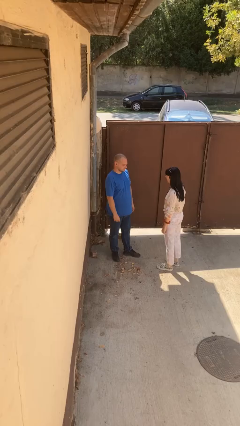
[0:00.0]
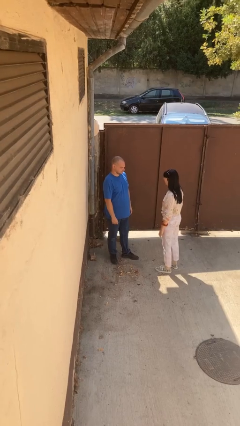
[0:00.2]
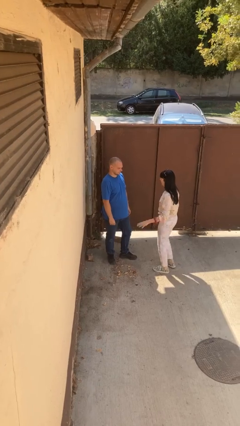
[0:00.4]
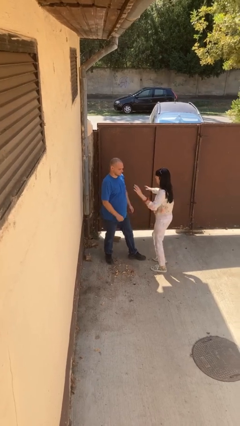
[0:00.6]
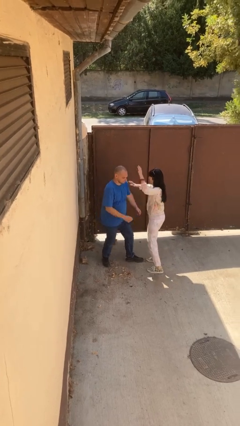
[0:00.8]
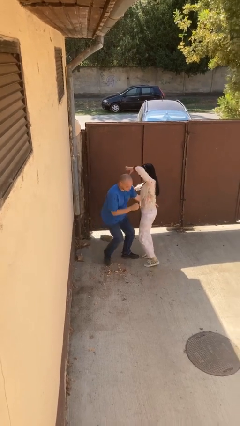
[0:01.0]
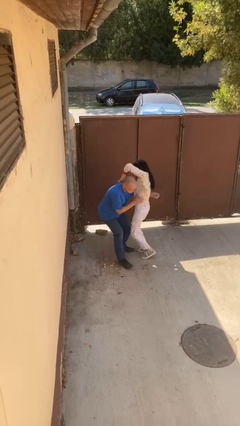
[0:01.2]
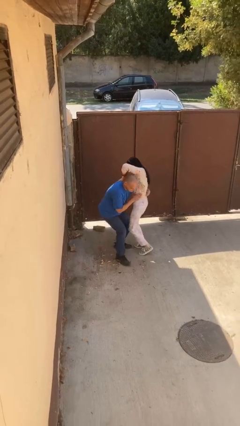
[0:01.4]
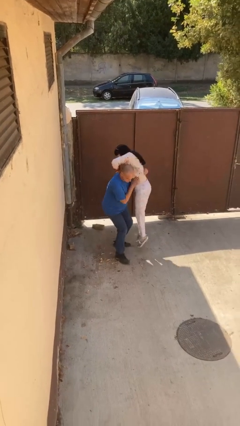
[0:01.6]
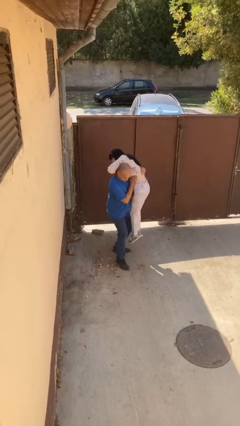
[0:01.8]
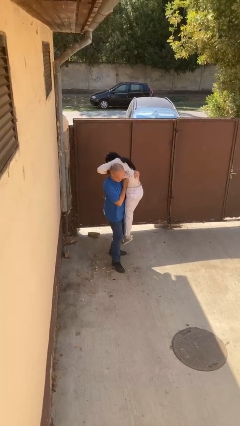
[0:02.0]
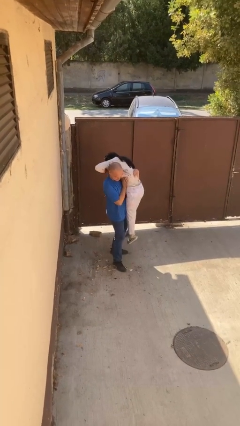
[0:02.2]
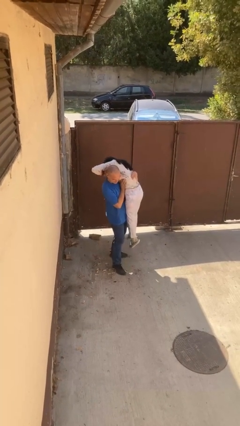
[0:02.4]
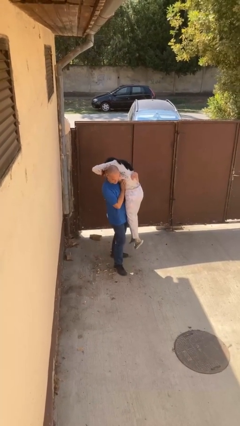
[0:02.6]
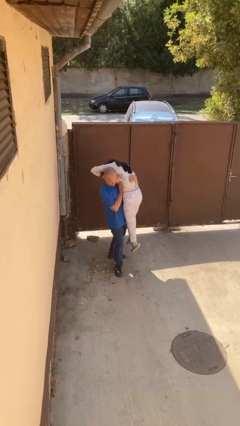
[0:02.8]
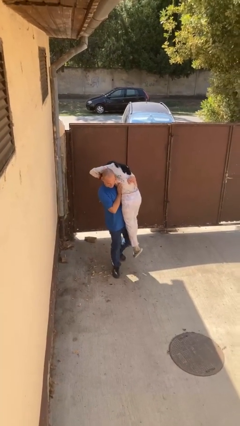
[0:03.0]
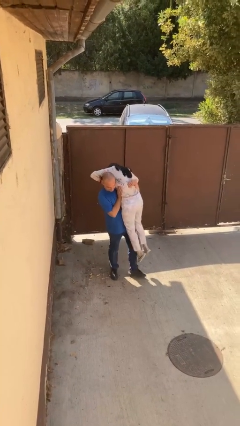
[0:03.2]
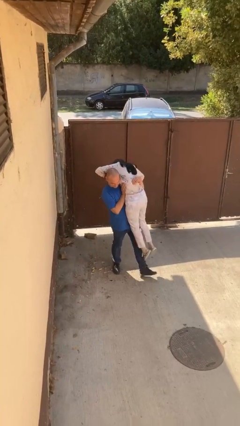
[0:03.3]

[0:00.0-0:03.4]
person carries person over shoulder

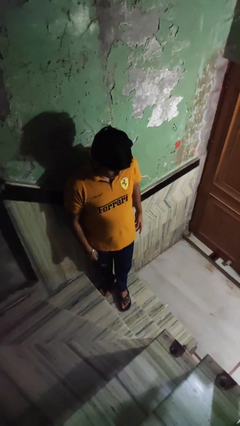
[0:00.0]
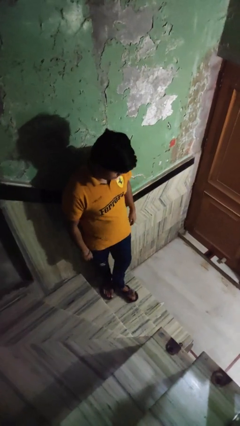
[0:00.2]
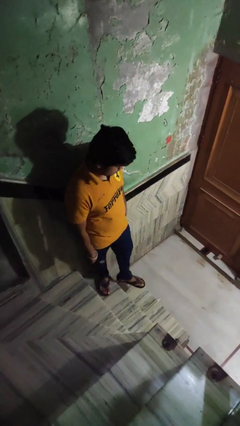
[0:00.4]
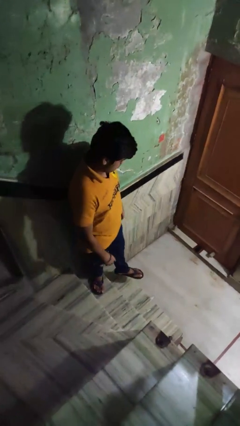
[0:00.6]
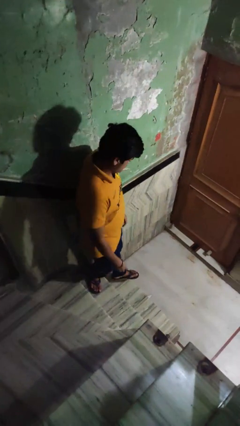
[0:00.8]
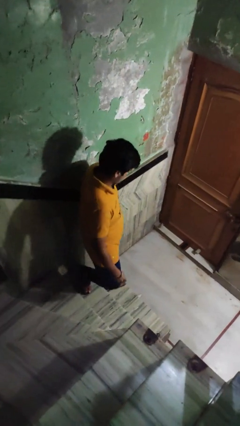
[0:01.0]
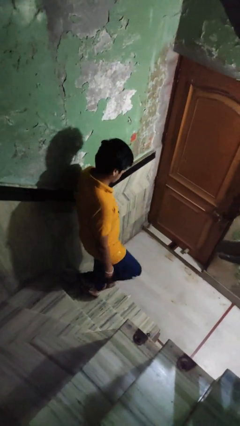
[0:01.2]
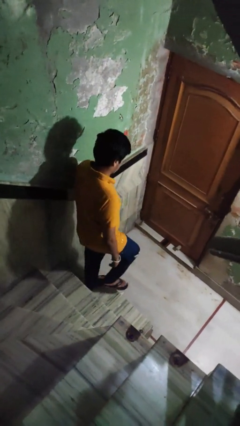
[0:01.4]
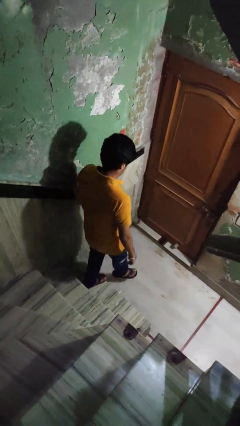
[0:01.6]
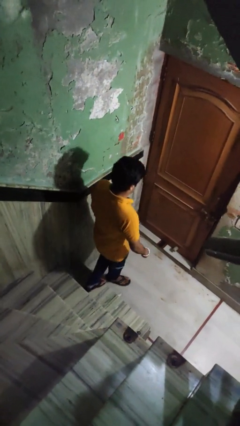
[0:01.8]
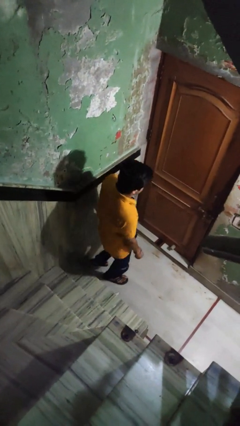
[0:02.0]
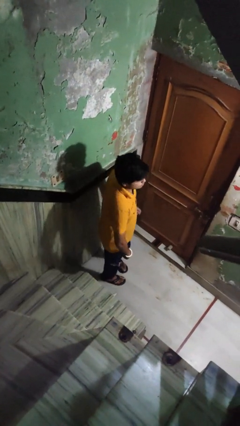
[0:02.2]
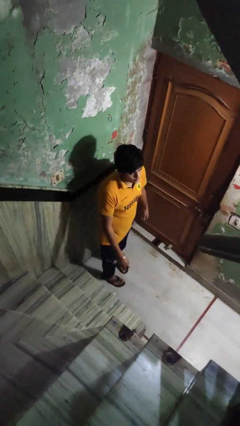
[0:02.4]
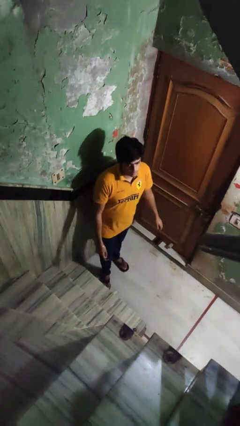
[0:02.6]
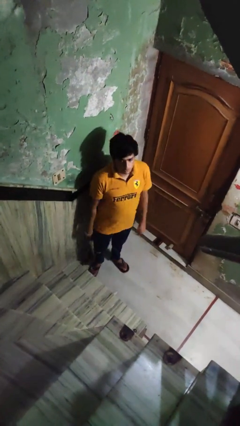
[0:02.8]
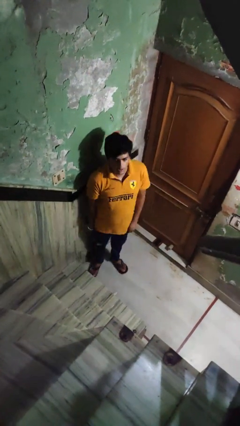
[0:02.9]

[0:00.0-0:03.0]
person climbs down stairs

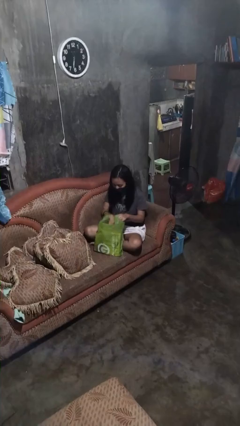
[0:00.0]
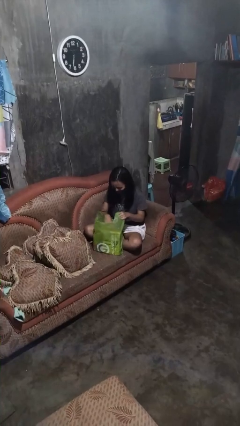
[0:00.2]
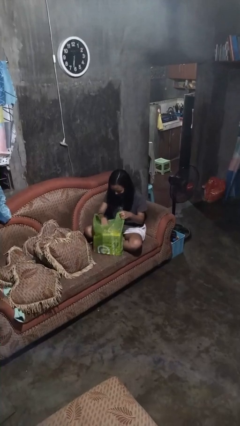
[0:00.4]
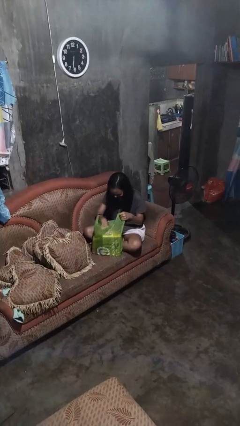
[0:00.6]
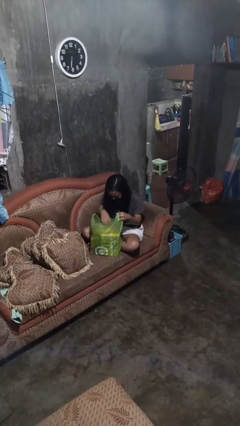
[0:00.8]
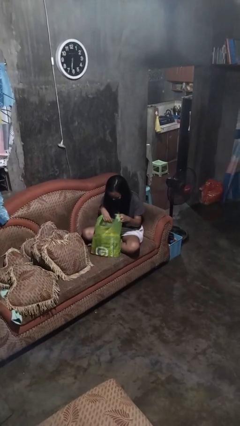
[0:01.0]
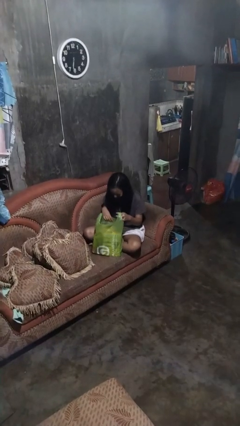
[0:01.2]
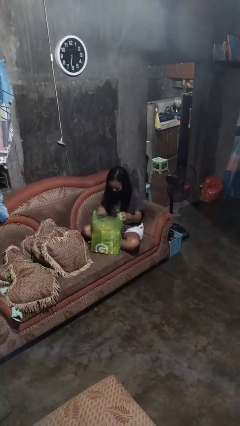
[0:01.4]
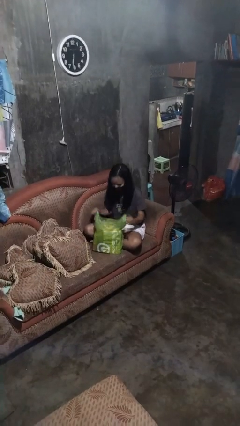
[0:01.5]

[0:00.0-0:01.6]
person searches in bag

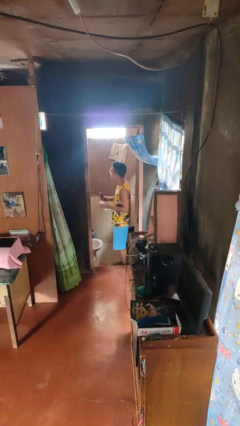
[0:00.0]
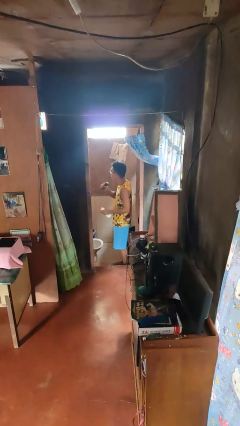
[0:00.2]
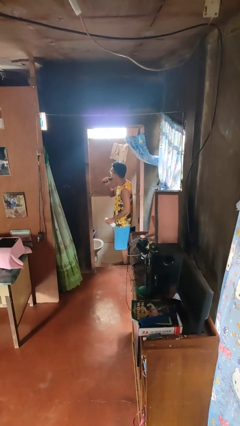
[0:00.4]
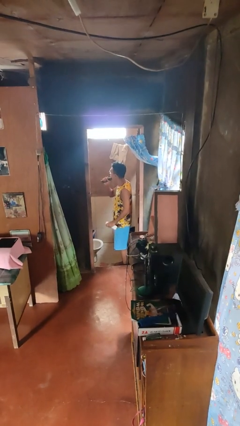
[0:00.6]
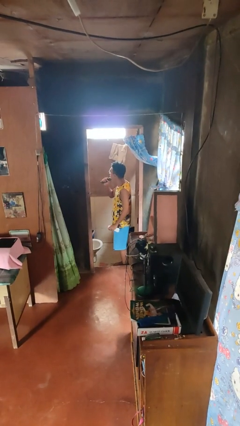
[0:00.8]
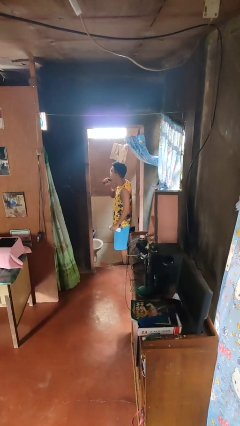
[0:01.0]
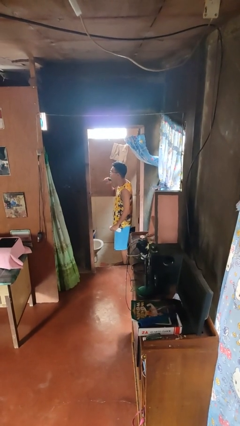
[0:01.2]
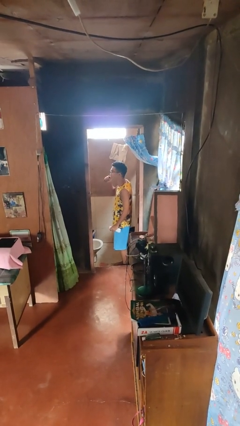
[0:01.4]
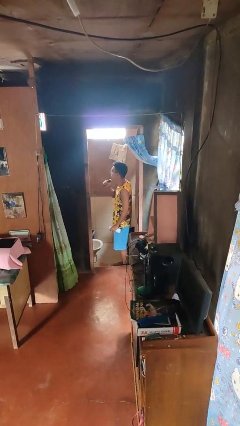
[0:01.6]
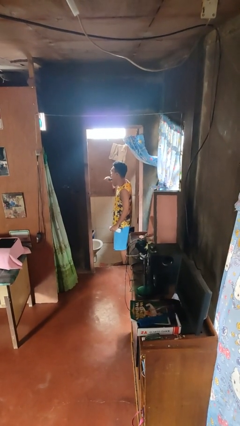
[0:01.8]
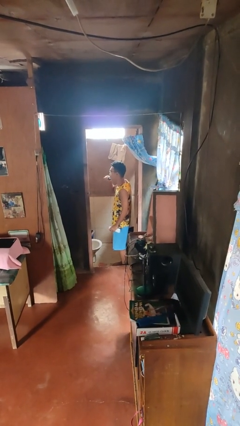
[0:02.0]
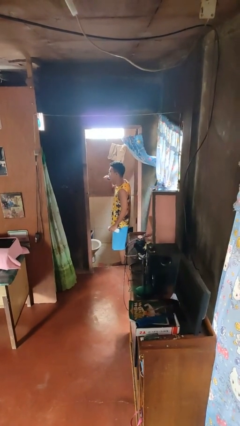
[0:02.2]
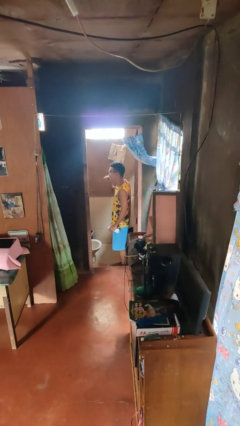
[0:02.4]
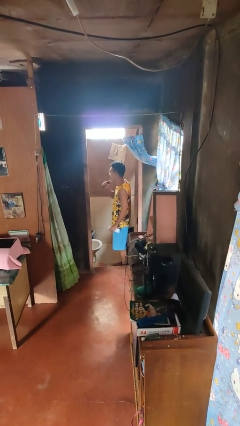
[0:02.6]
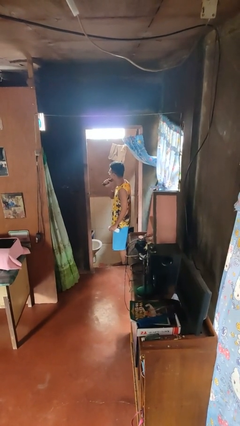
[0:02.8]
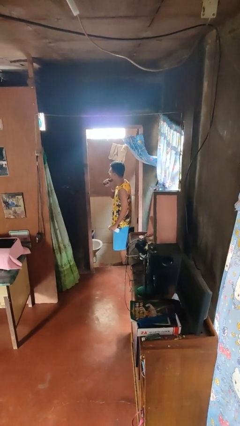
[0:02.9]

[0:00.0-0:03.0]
person shaves face

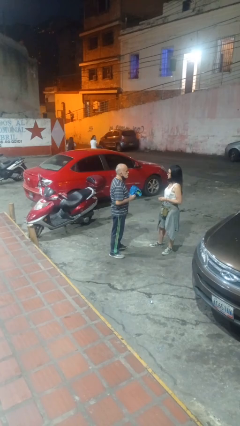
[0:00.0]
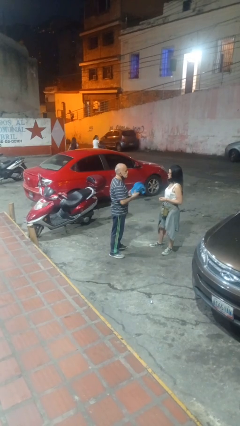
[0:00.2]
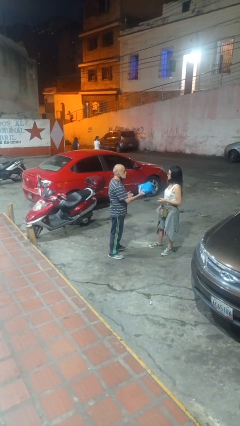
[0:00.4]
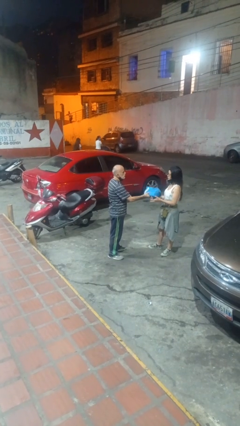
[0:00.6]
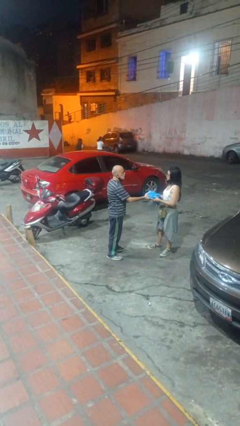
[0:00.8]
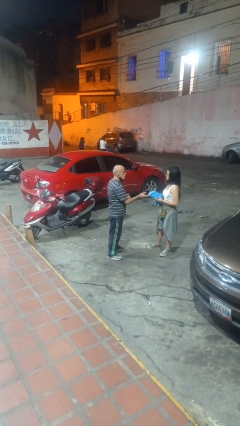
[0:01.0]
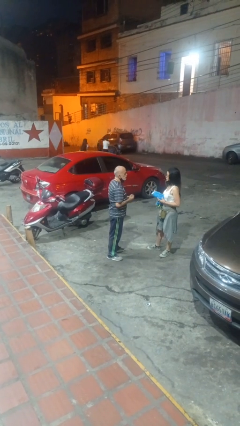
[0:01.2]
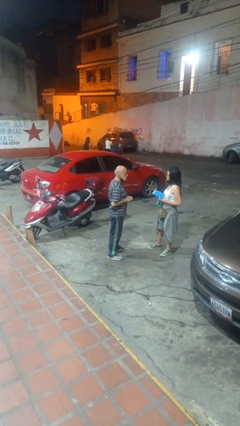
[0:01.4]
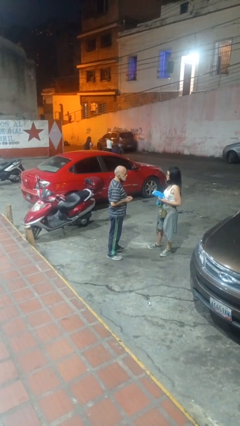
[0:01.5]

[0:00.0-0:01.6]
person transfers object to person

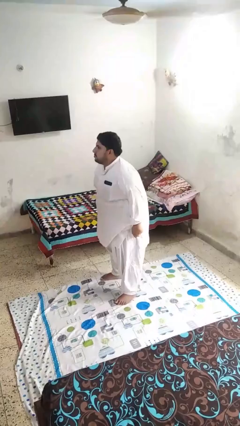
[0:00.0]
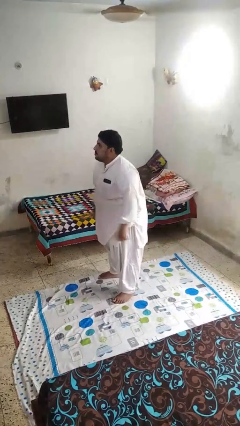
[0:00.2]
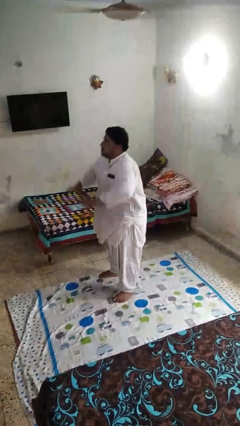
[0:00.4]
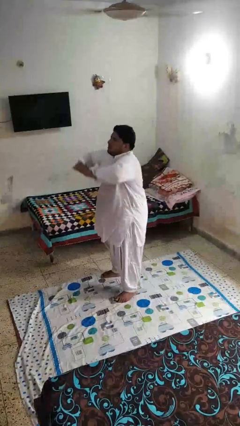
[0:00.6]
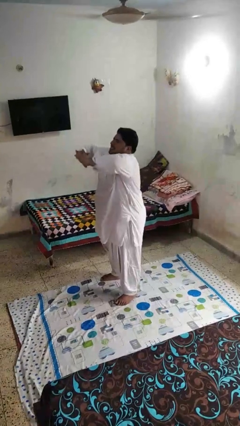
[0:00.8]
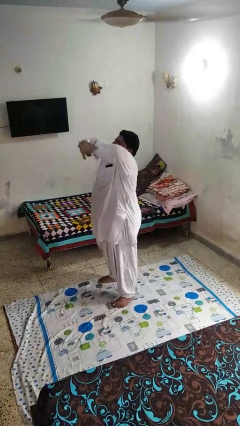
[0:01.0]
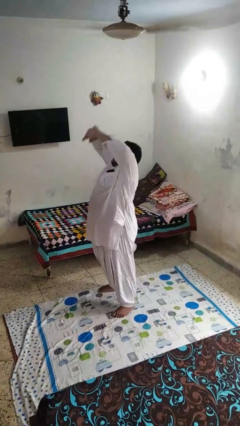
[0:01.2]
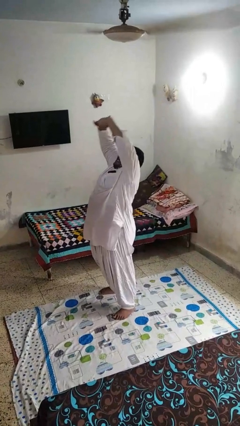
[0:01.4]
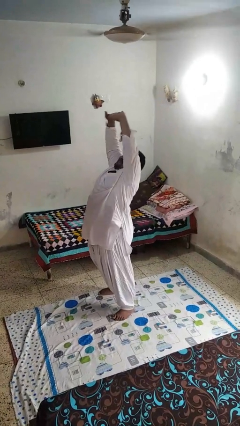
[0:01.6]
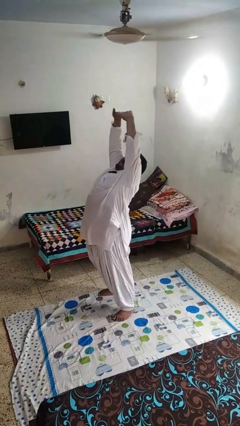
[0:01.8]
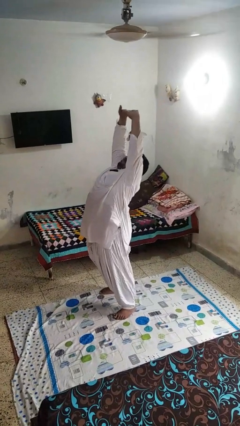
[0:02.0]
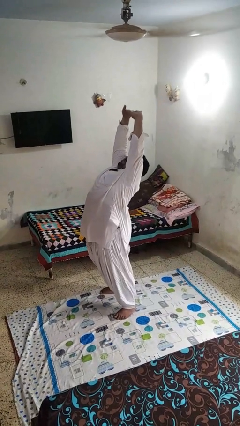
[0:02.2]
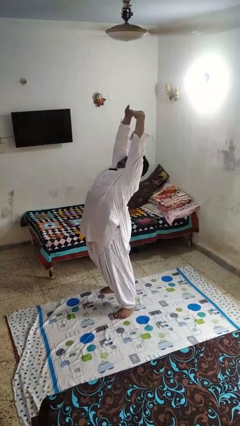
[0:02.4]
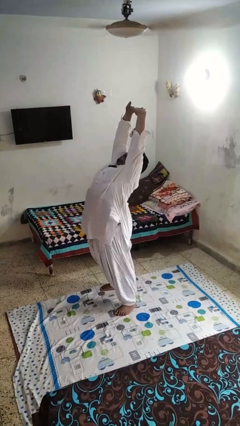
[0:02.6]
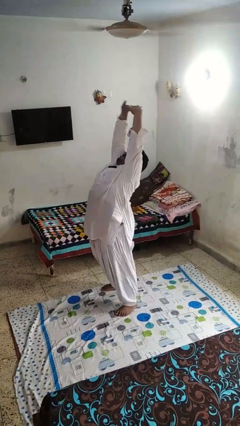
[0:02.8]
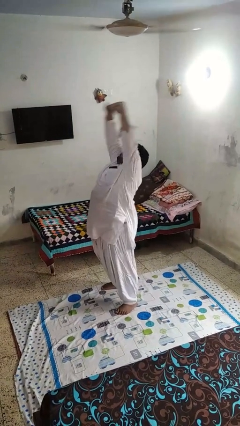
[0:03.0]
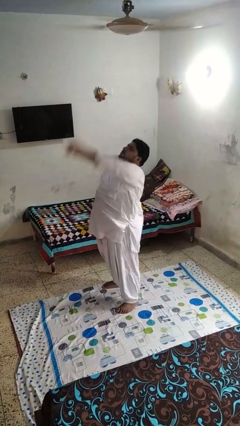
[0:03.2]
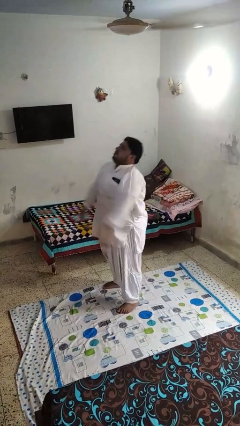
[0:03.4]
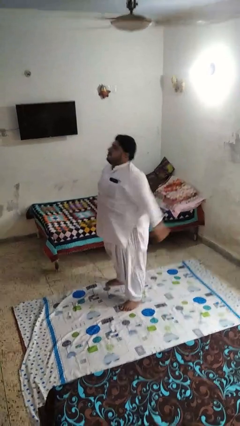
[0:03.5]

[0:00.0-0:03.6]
person stretches arms over head

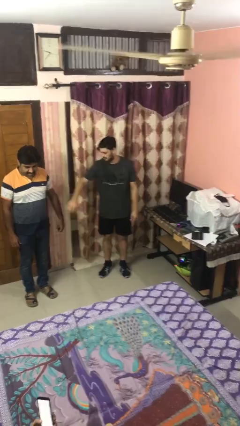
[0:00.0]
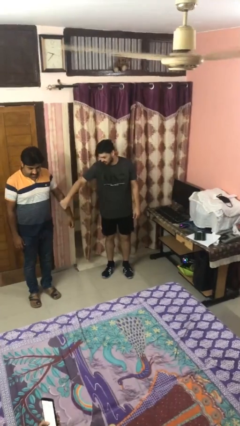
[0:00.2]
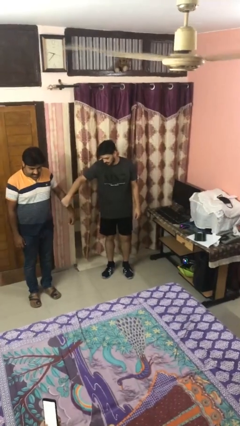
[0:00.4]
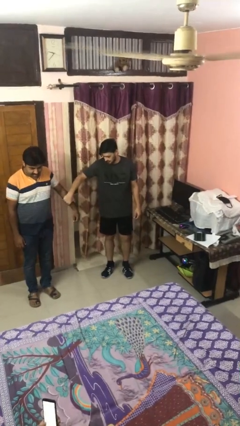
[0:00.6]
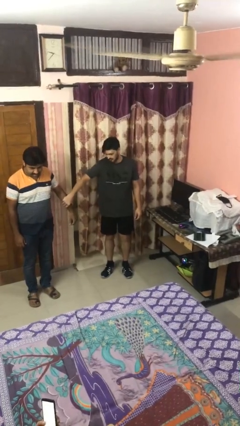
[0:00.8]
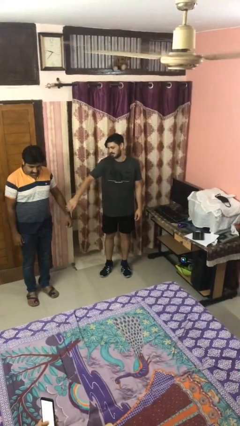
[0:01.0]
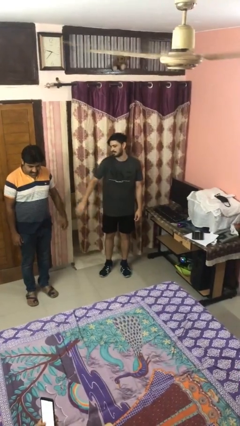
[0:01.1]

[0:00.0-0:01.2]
person grabs person by forearm
